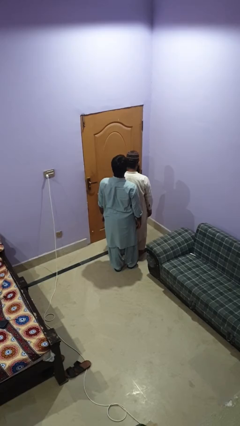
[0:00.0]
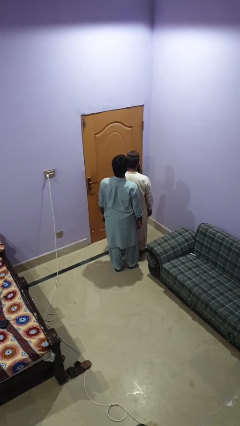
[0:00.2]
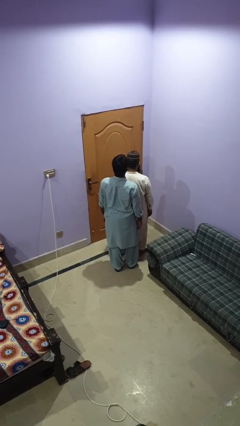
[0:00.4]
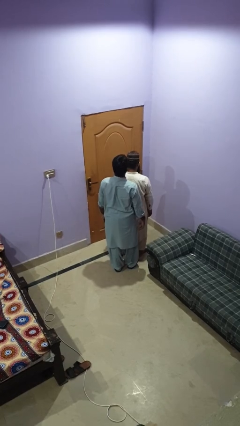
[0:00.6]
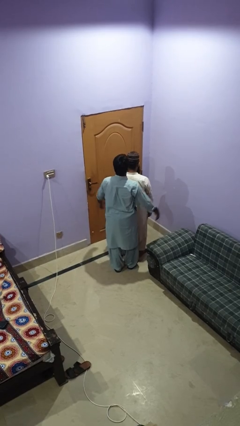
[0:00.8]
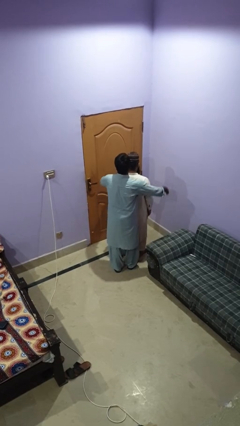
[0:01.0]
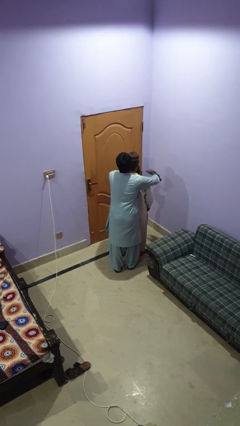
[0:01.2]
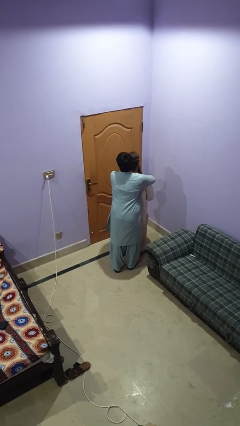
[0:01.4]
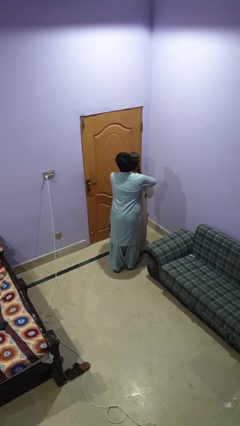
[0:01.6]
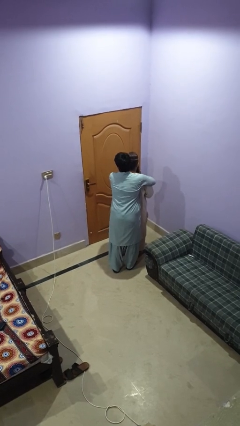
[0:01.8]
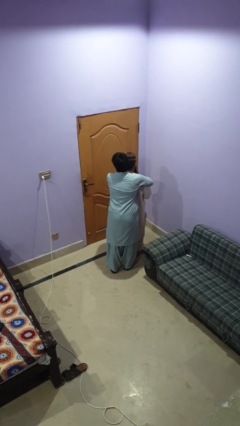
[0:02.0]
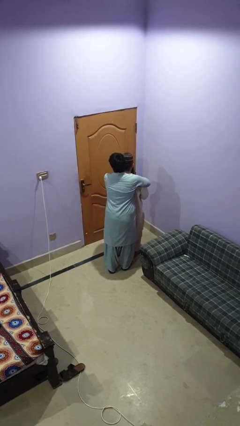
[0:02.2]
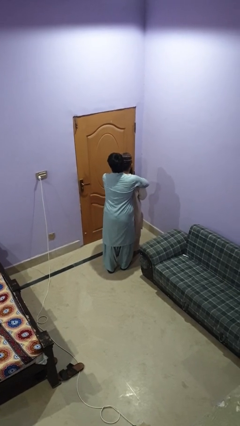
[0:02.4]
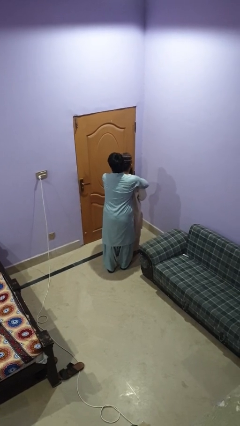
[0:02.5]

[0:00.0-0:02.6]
person hugs person from behind

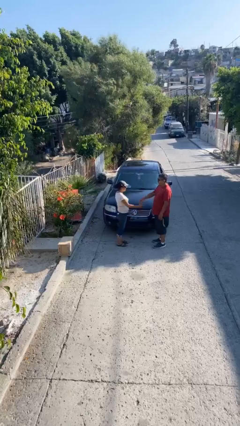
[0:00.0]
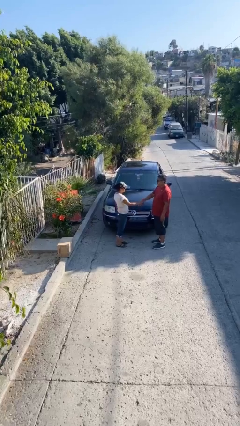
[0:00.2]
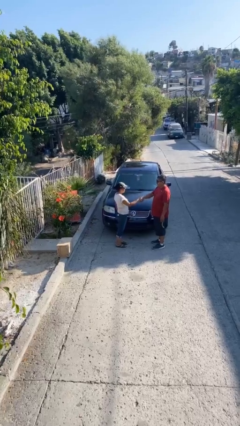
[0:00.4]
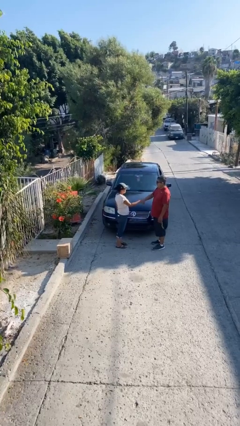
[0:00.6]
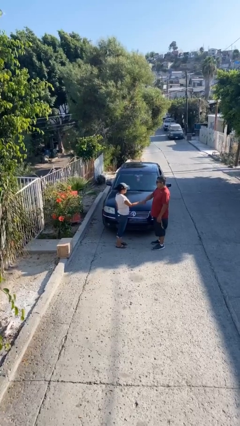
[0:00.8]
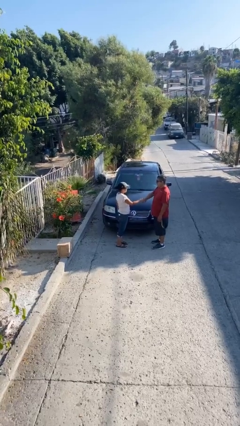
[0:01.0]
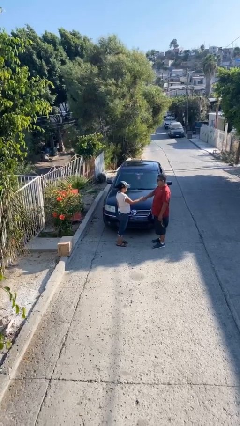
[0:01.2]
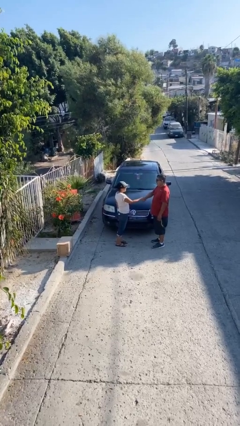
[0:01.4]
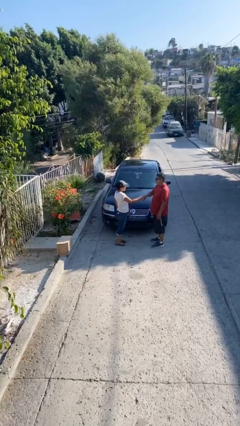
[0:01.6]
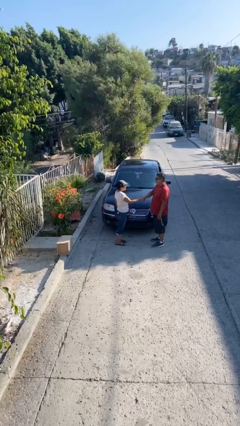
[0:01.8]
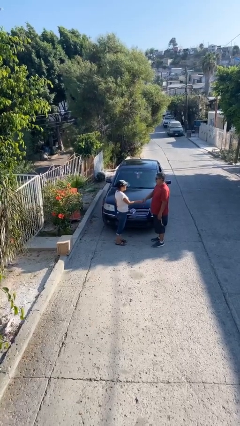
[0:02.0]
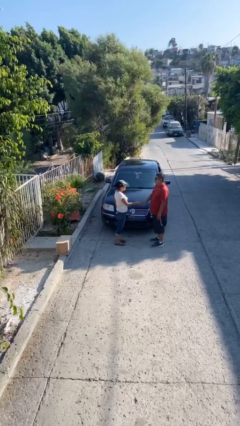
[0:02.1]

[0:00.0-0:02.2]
person shakes hand

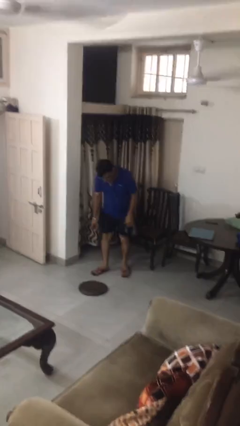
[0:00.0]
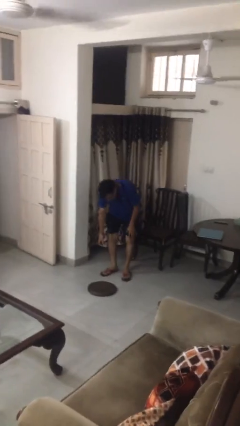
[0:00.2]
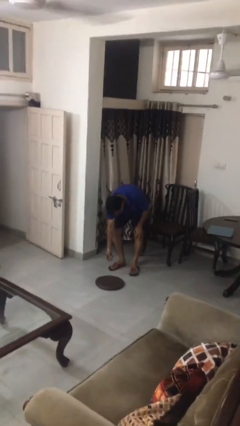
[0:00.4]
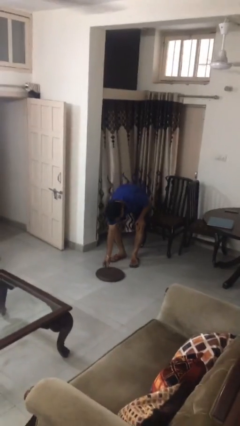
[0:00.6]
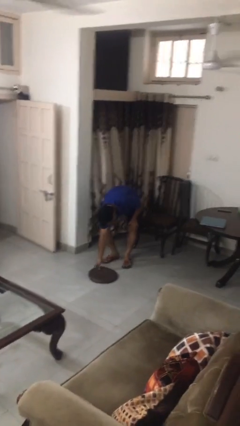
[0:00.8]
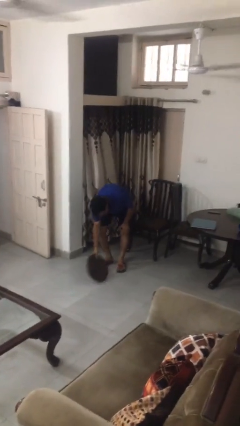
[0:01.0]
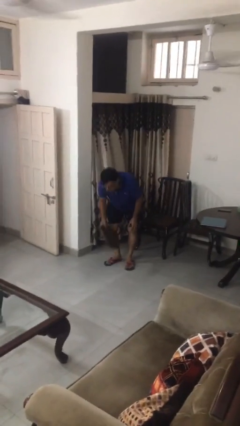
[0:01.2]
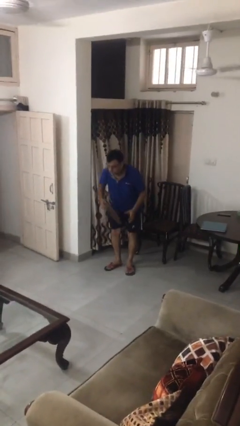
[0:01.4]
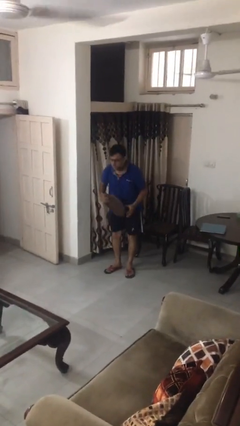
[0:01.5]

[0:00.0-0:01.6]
person picks up object from floor

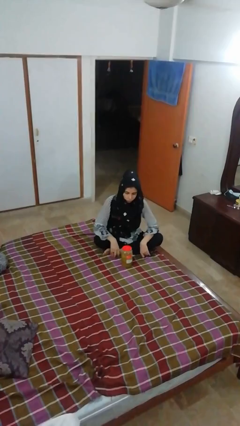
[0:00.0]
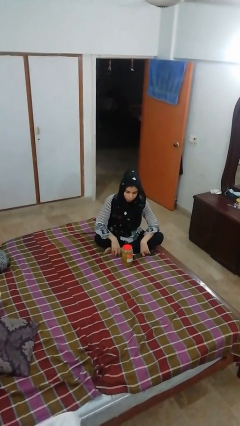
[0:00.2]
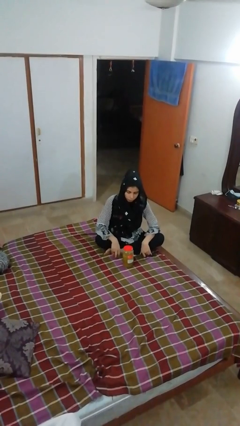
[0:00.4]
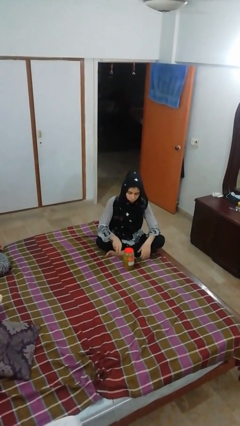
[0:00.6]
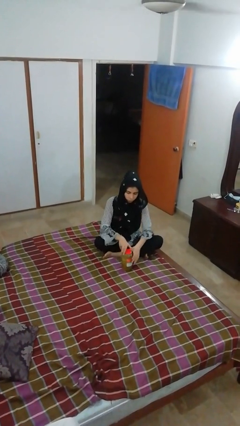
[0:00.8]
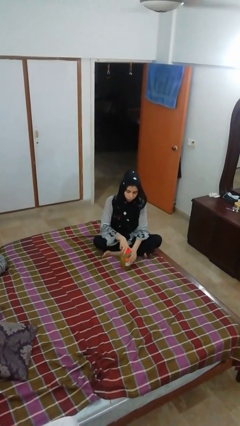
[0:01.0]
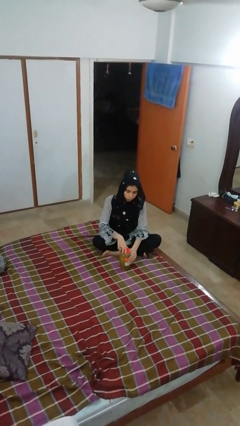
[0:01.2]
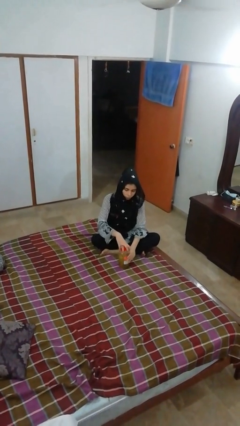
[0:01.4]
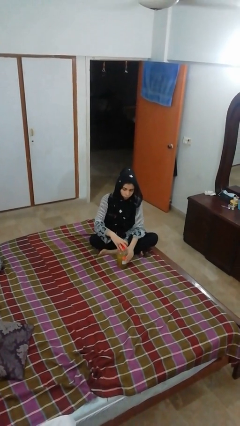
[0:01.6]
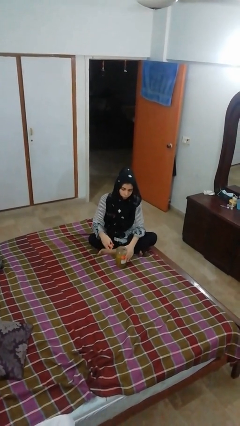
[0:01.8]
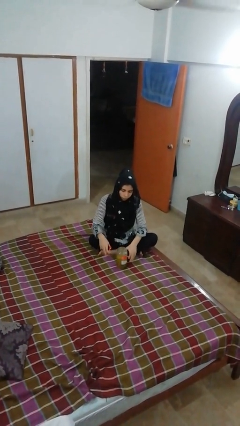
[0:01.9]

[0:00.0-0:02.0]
person opens jar

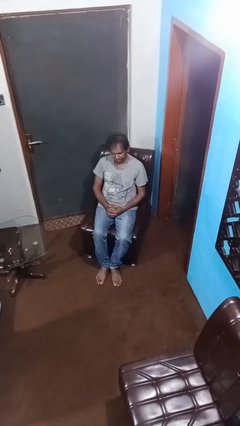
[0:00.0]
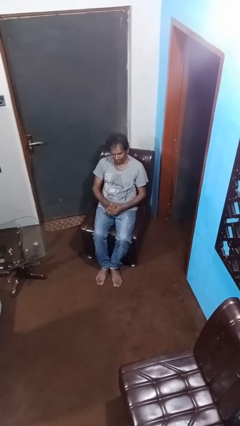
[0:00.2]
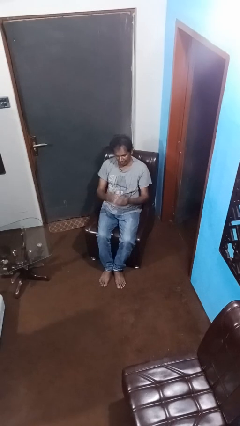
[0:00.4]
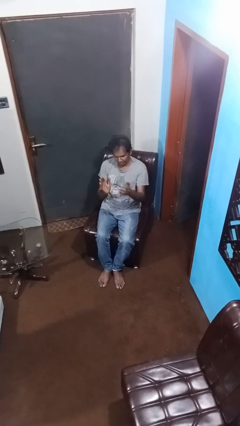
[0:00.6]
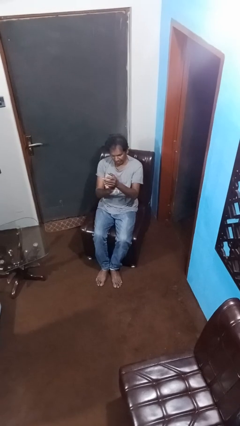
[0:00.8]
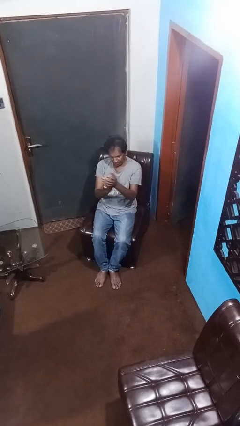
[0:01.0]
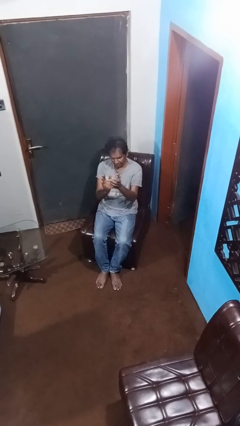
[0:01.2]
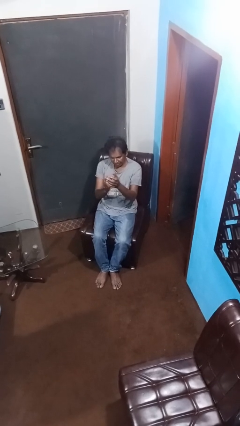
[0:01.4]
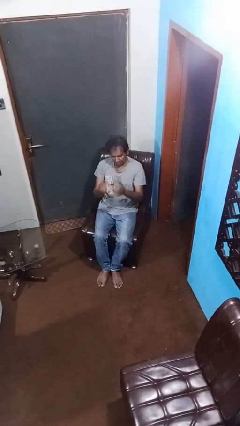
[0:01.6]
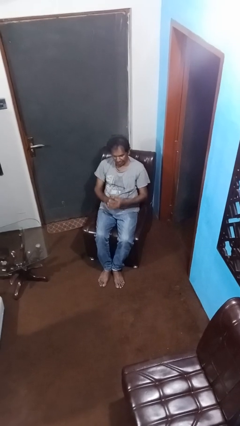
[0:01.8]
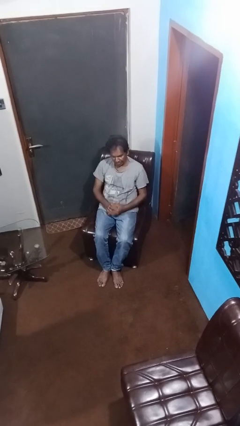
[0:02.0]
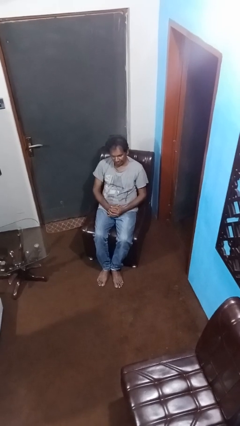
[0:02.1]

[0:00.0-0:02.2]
person claps hands

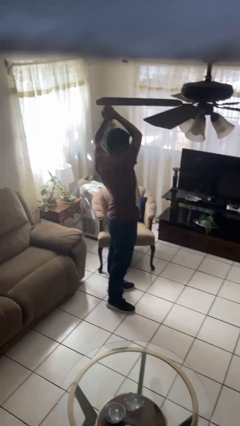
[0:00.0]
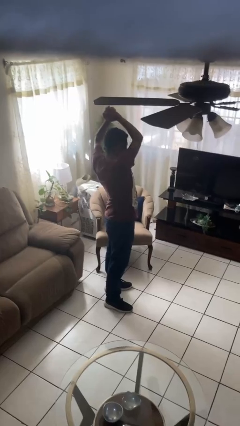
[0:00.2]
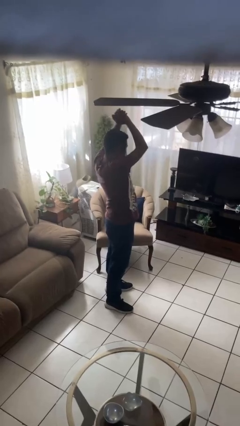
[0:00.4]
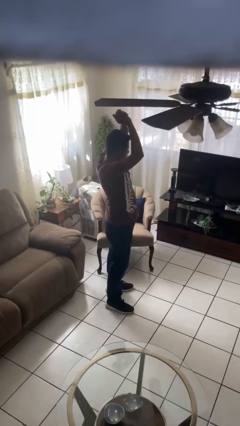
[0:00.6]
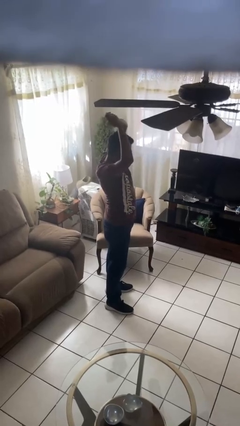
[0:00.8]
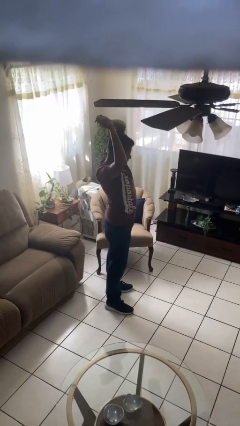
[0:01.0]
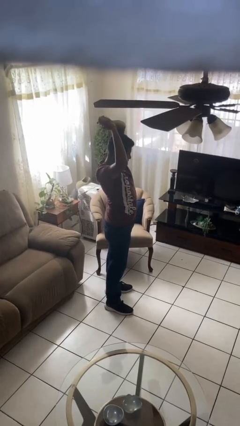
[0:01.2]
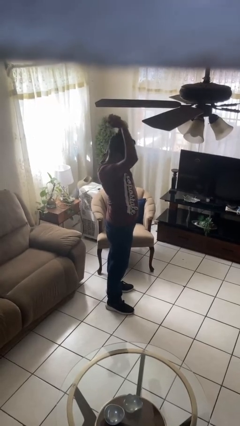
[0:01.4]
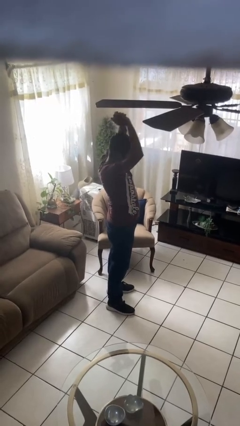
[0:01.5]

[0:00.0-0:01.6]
person stretches arms over head

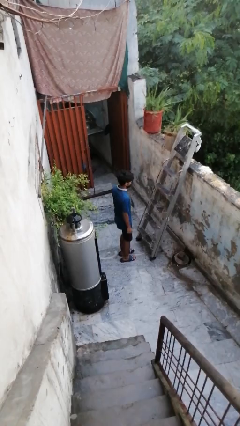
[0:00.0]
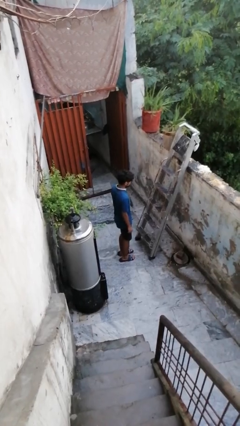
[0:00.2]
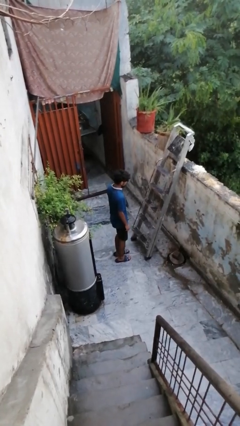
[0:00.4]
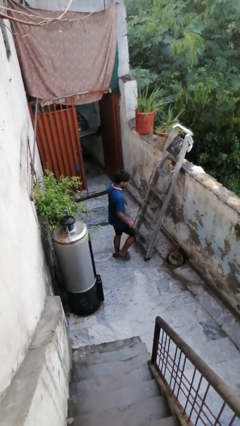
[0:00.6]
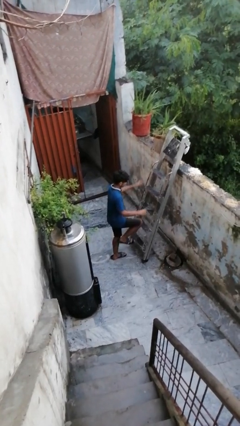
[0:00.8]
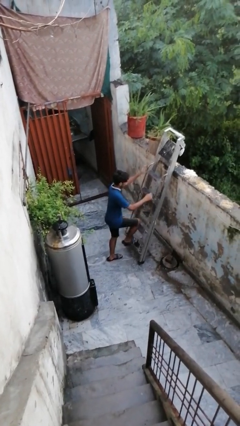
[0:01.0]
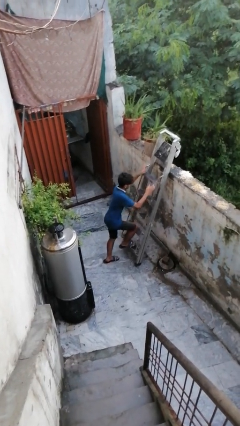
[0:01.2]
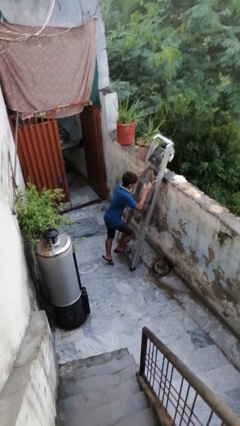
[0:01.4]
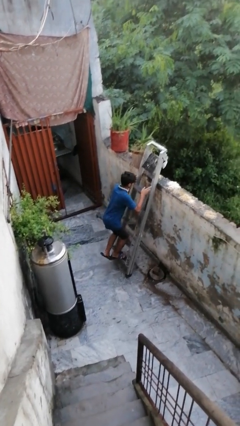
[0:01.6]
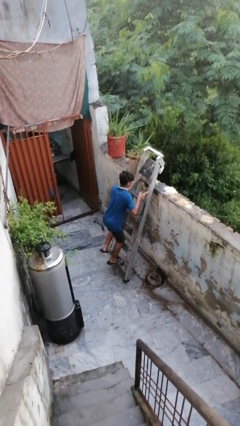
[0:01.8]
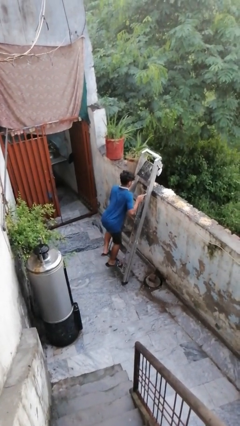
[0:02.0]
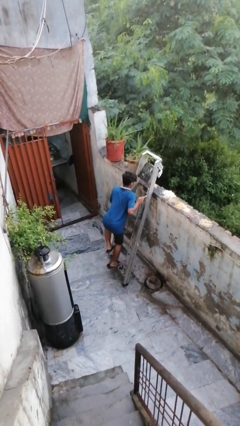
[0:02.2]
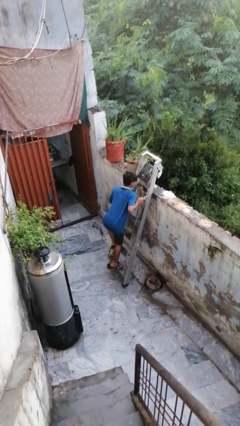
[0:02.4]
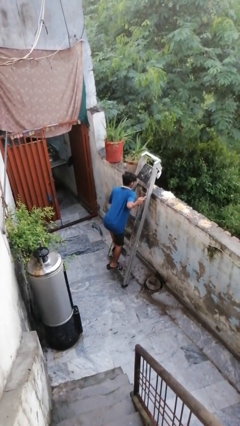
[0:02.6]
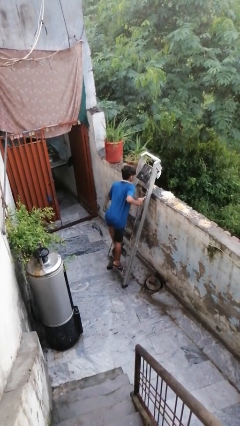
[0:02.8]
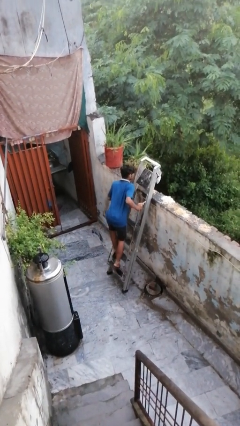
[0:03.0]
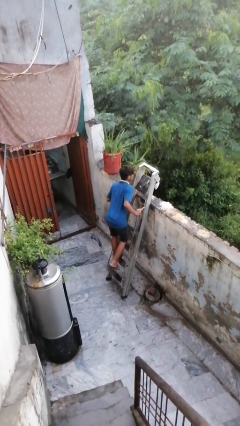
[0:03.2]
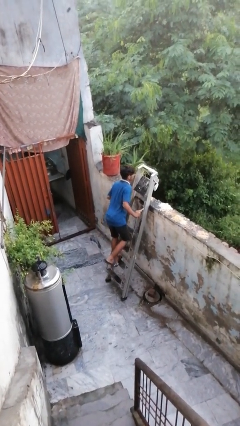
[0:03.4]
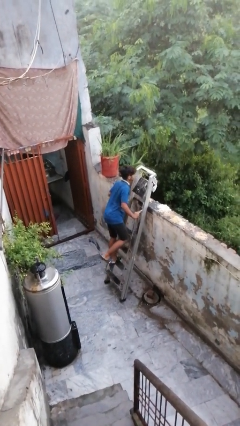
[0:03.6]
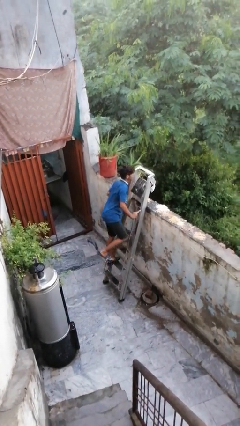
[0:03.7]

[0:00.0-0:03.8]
person climbs up ladder

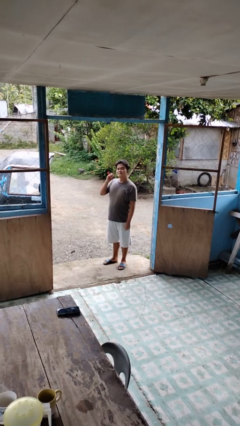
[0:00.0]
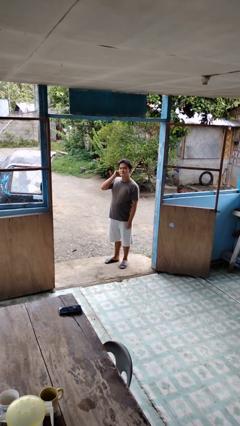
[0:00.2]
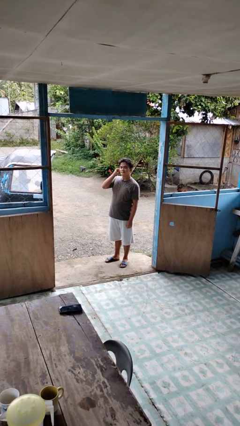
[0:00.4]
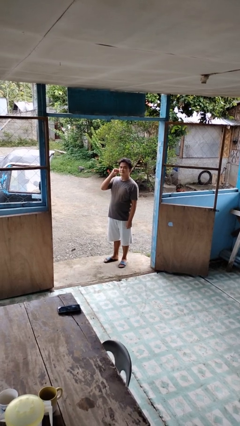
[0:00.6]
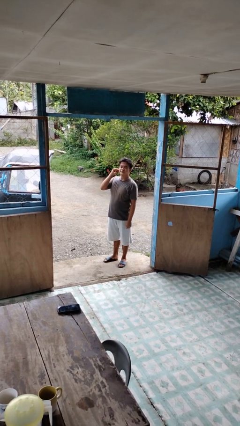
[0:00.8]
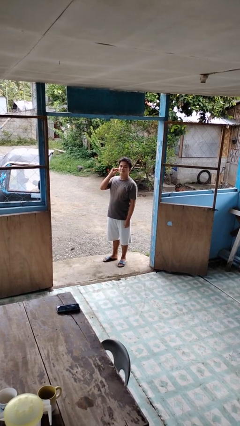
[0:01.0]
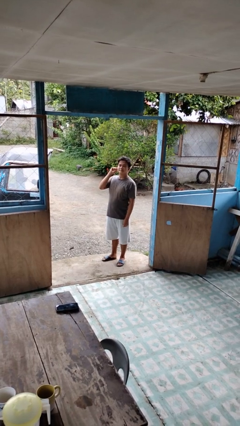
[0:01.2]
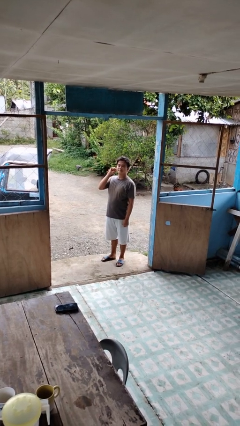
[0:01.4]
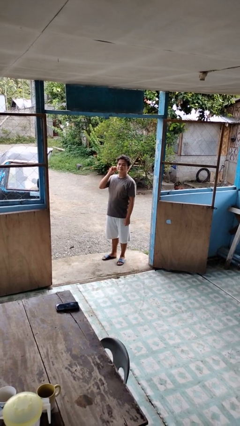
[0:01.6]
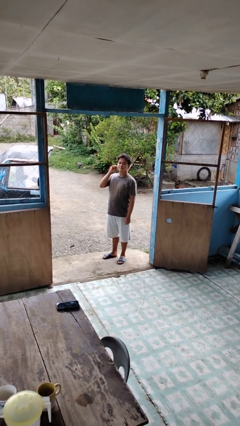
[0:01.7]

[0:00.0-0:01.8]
person touches earlobe
